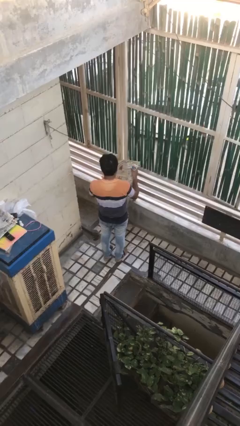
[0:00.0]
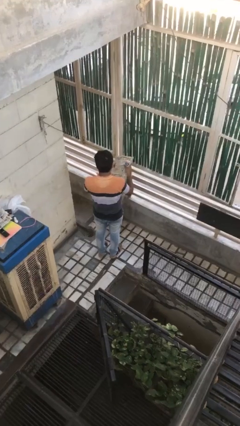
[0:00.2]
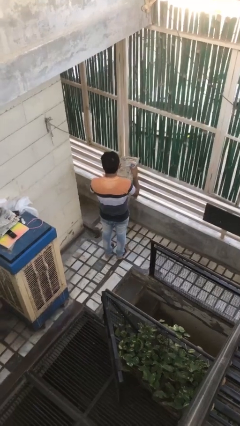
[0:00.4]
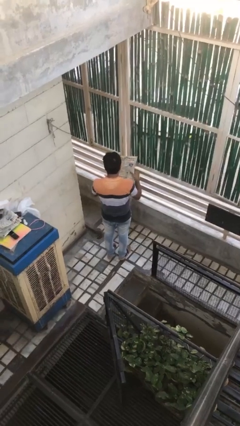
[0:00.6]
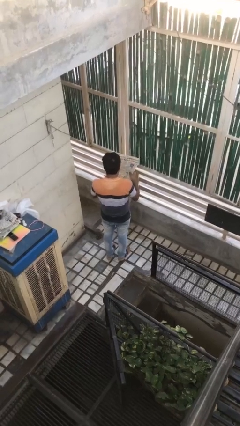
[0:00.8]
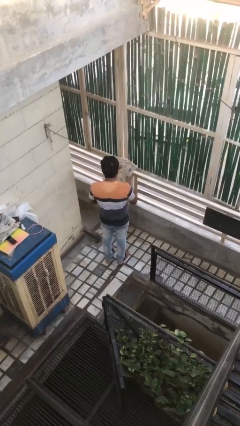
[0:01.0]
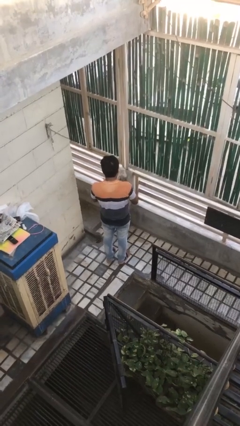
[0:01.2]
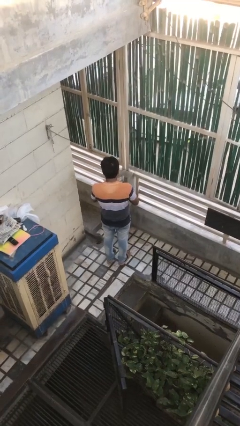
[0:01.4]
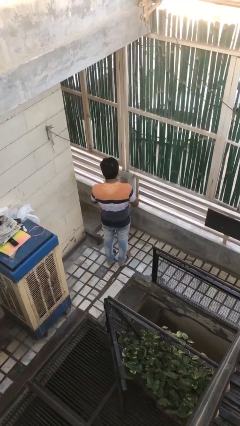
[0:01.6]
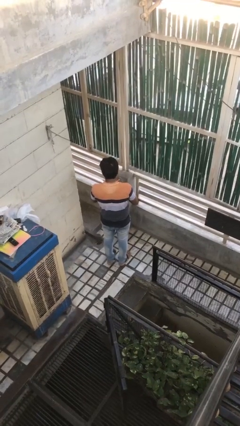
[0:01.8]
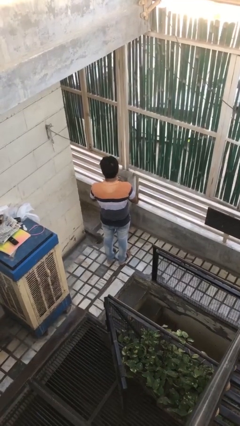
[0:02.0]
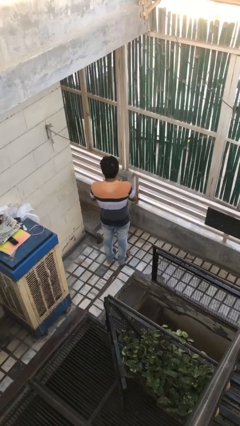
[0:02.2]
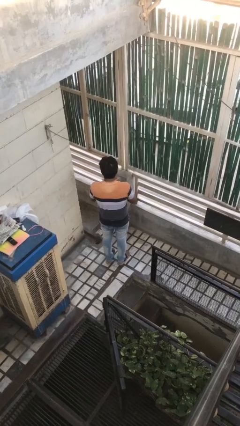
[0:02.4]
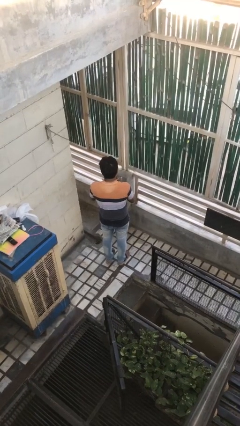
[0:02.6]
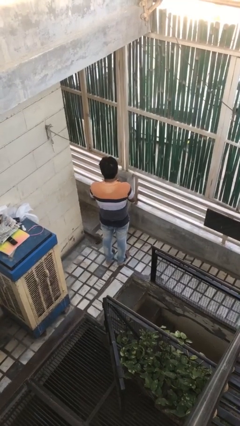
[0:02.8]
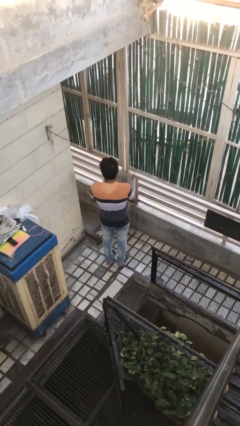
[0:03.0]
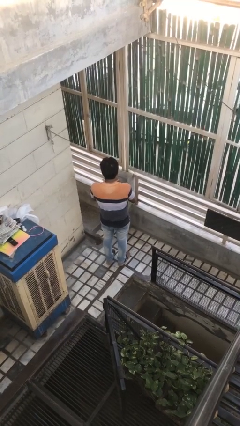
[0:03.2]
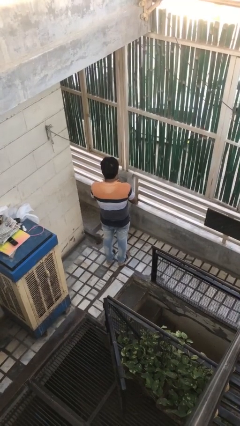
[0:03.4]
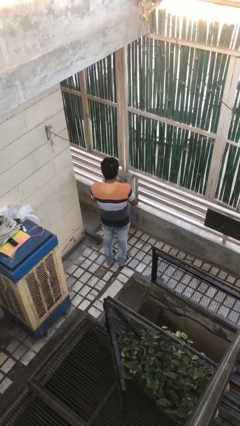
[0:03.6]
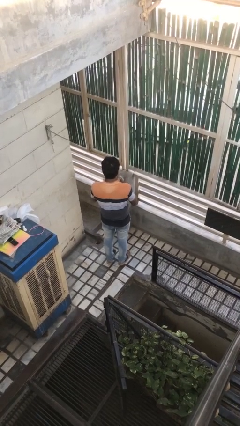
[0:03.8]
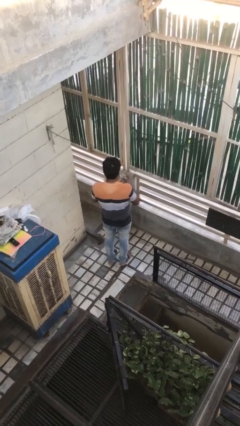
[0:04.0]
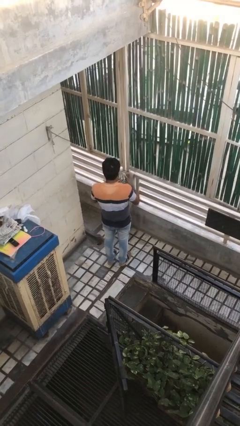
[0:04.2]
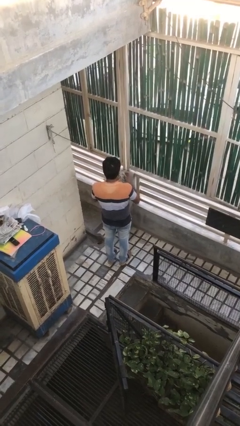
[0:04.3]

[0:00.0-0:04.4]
person crumples paper

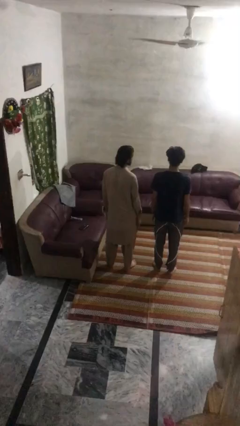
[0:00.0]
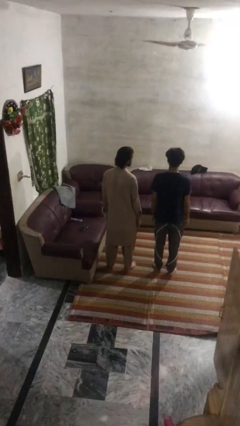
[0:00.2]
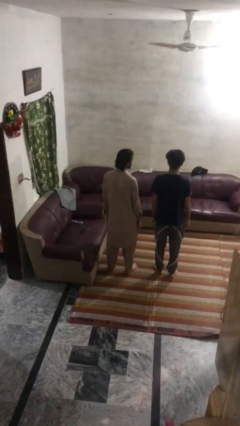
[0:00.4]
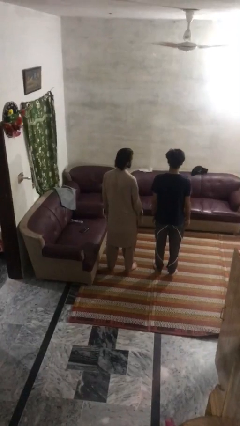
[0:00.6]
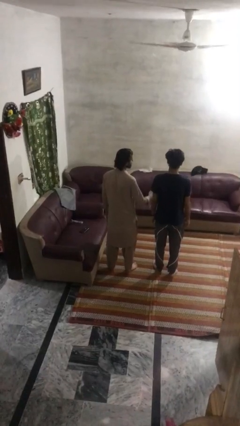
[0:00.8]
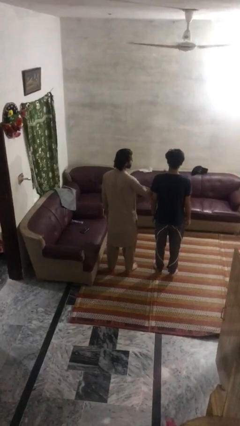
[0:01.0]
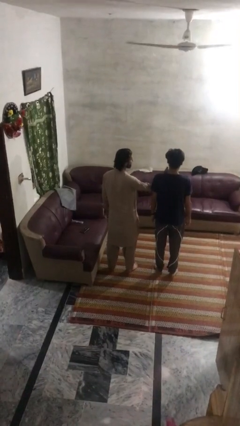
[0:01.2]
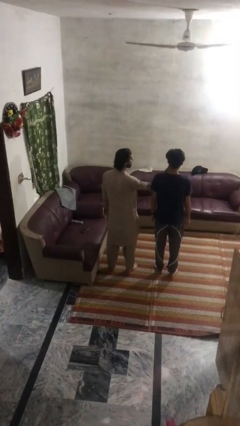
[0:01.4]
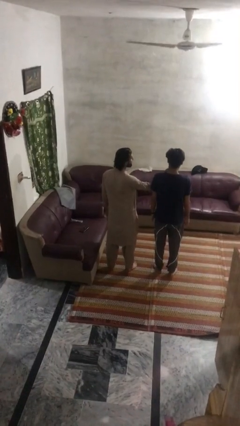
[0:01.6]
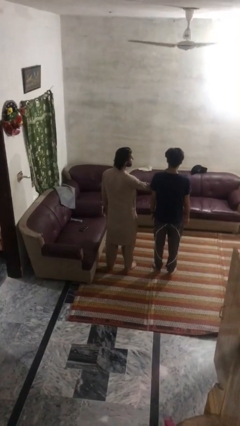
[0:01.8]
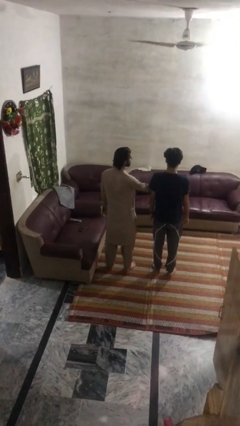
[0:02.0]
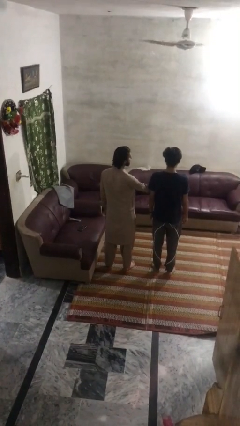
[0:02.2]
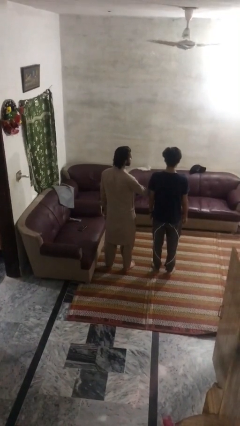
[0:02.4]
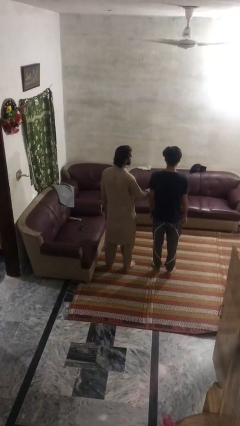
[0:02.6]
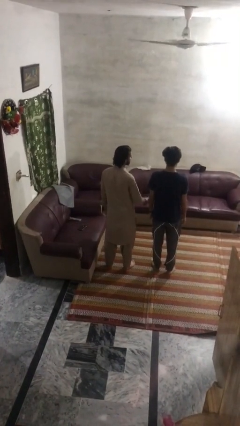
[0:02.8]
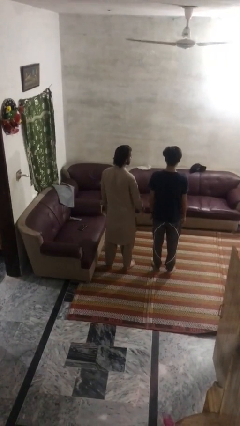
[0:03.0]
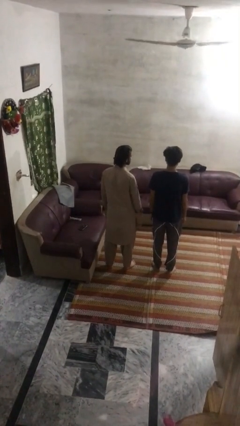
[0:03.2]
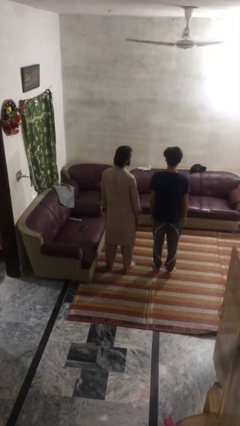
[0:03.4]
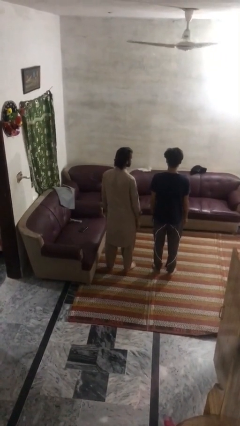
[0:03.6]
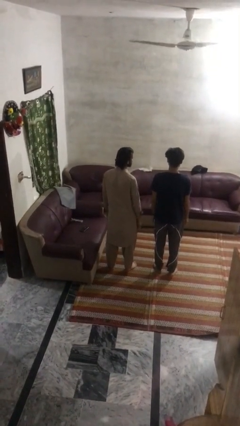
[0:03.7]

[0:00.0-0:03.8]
person touches face of person

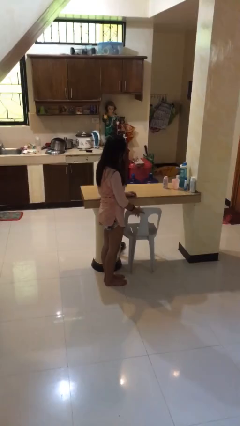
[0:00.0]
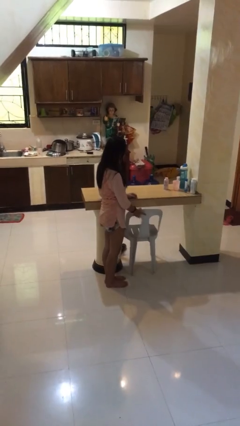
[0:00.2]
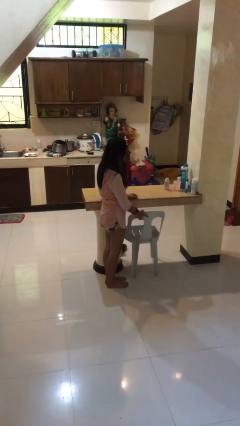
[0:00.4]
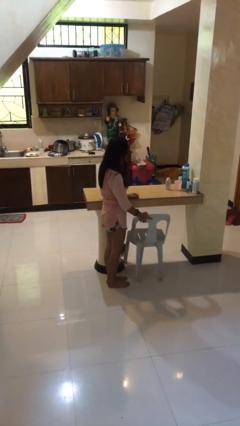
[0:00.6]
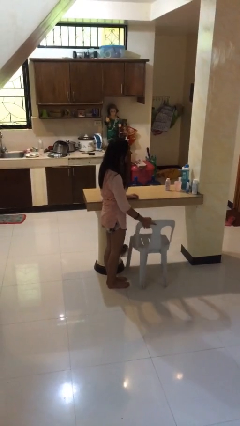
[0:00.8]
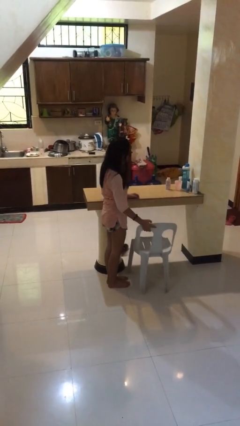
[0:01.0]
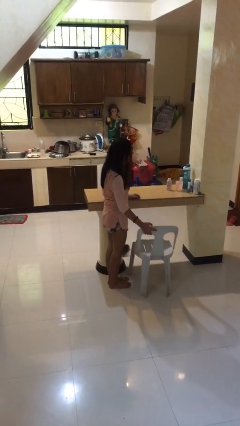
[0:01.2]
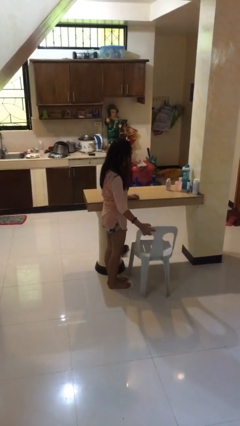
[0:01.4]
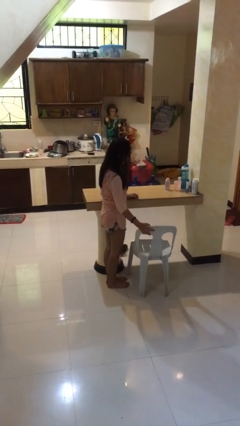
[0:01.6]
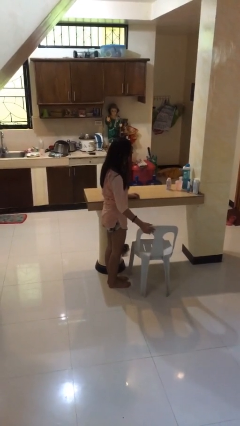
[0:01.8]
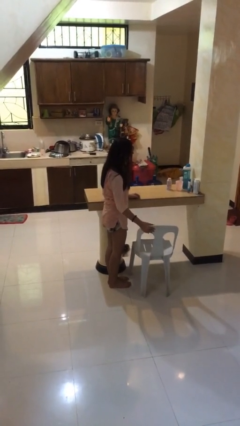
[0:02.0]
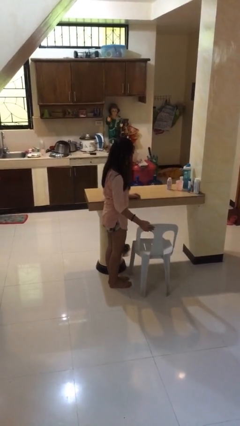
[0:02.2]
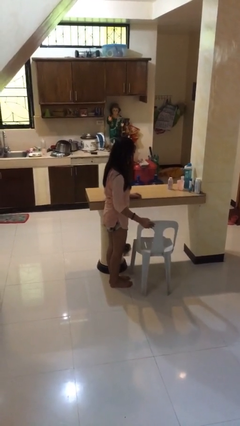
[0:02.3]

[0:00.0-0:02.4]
person pulls out chair

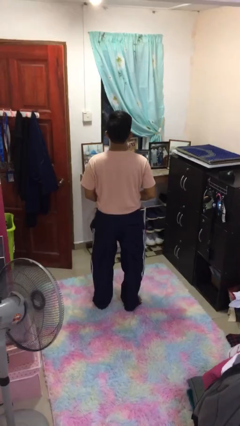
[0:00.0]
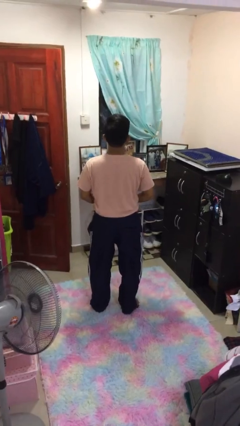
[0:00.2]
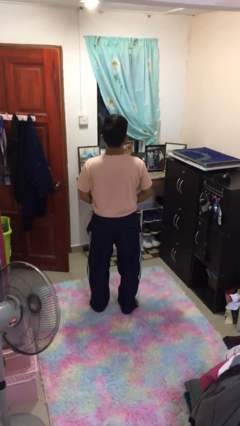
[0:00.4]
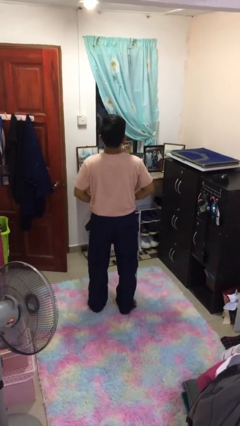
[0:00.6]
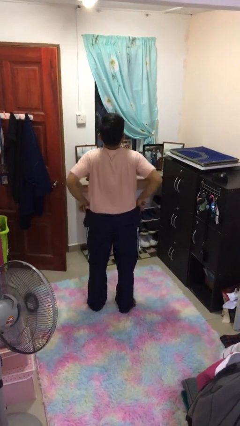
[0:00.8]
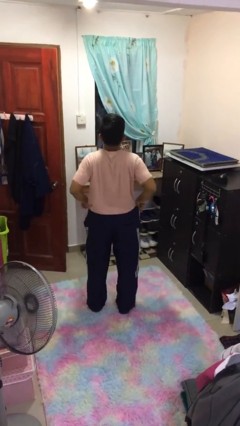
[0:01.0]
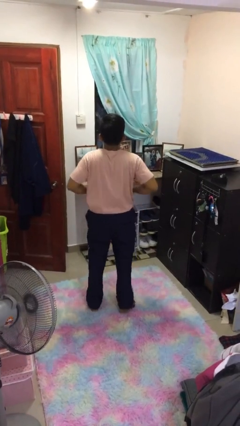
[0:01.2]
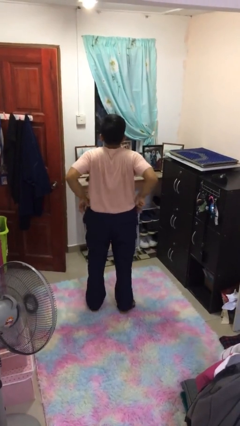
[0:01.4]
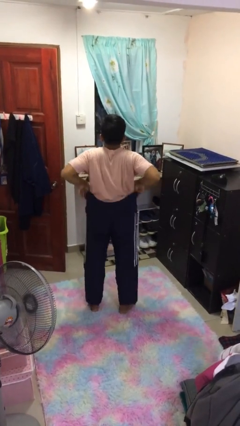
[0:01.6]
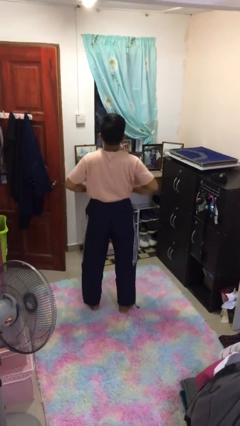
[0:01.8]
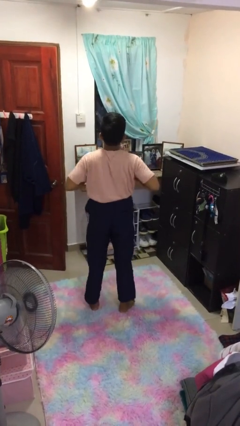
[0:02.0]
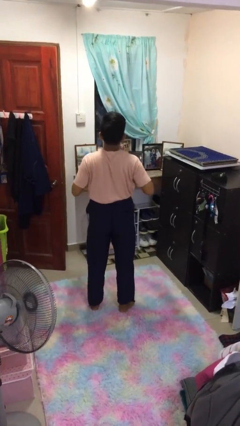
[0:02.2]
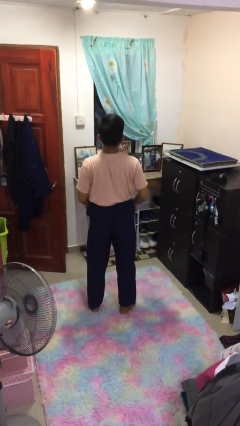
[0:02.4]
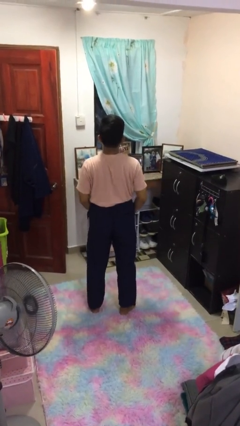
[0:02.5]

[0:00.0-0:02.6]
person hikes up pants

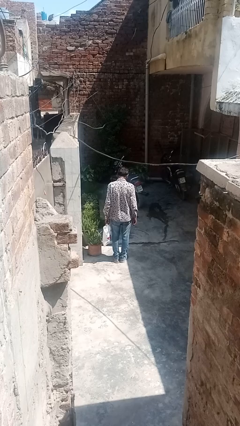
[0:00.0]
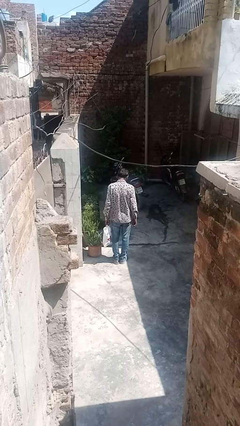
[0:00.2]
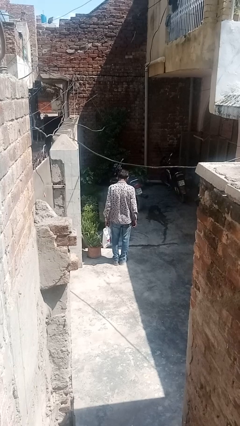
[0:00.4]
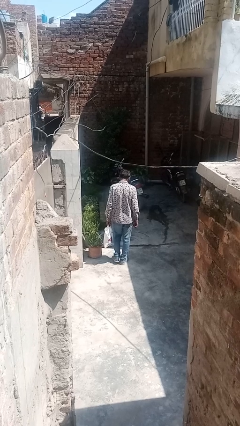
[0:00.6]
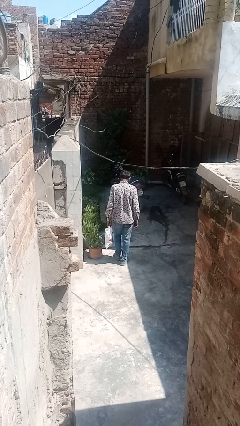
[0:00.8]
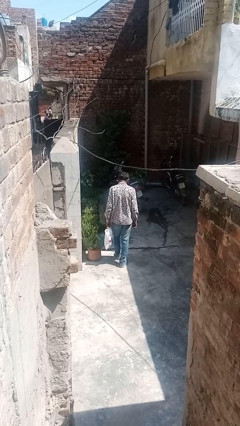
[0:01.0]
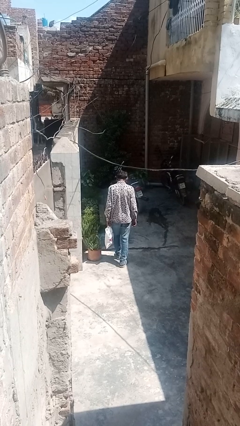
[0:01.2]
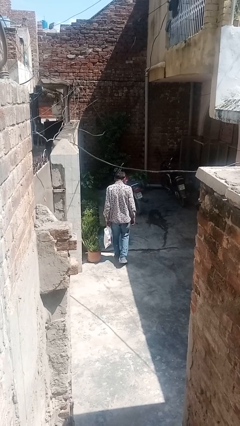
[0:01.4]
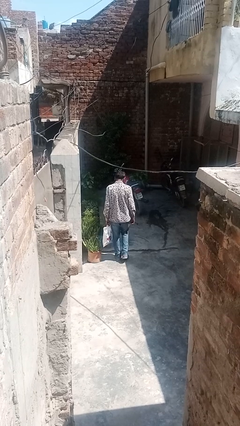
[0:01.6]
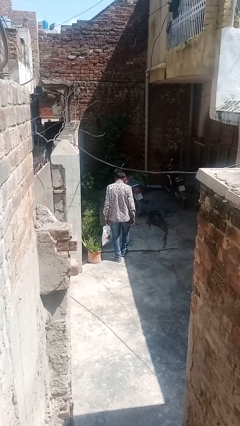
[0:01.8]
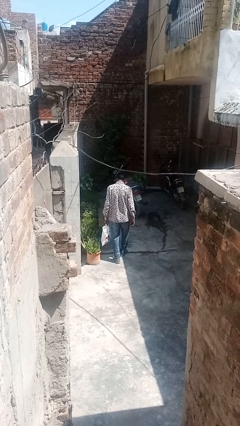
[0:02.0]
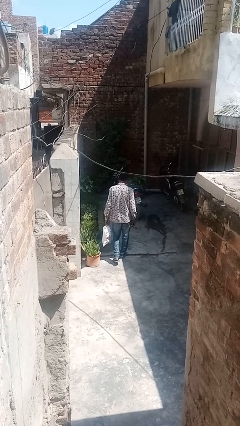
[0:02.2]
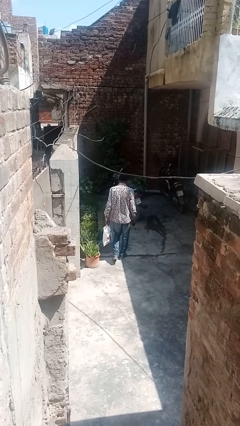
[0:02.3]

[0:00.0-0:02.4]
person carries groceries

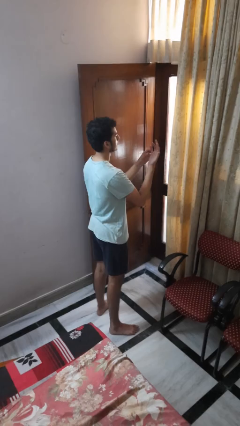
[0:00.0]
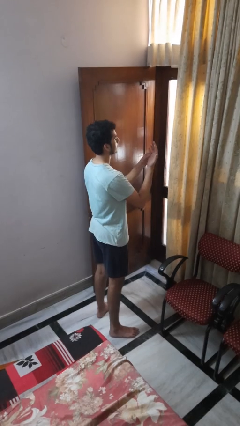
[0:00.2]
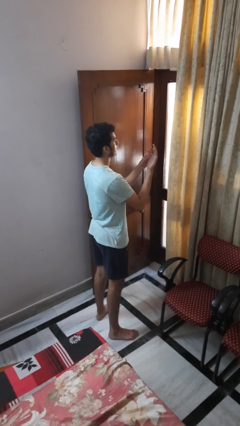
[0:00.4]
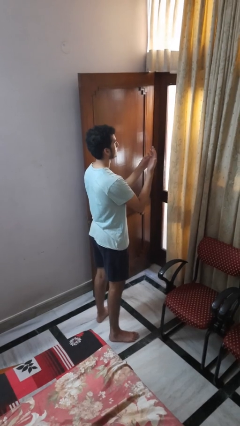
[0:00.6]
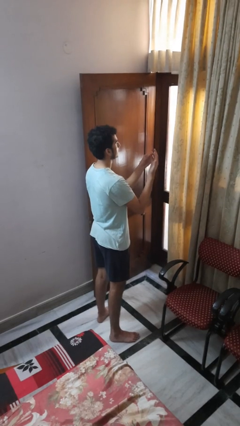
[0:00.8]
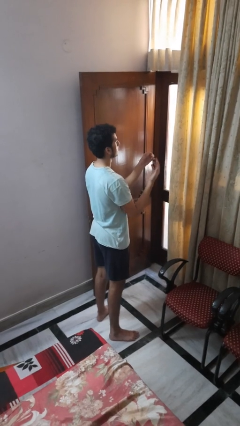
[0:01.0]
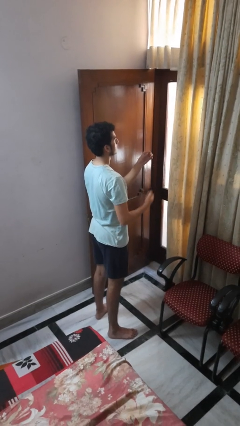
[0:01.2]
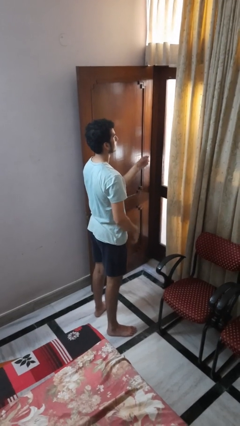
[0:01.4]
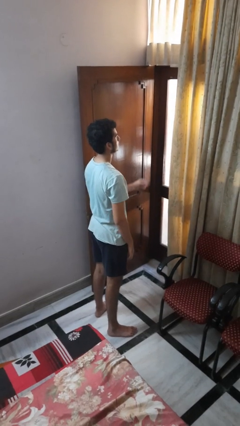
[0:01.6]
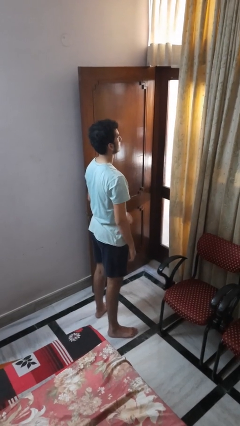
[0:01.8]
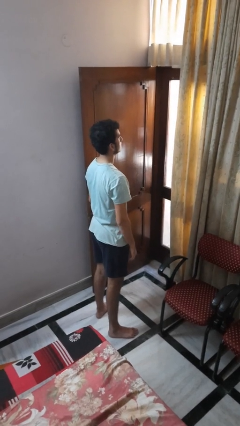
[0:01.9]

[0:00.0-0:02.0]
person takes off ring
